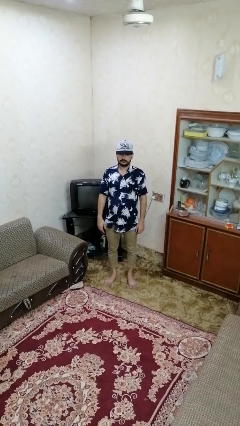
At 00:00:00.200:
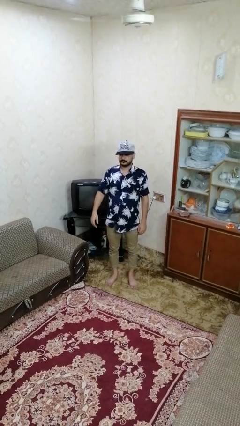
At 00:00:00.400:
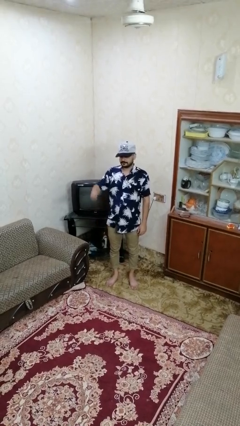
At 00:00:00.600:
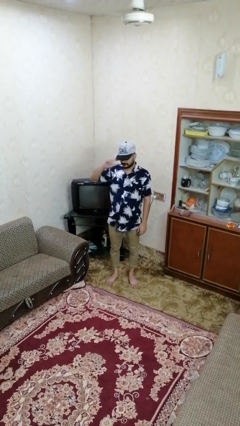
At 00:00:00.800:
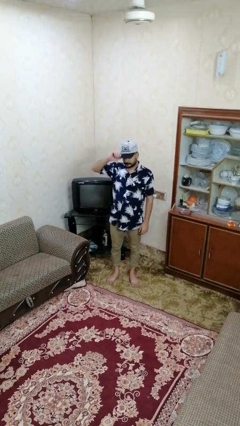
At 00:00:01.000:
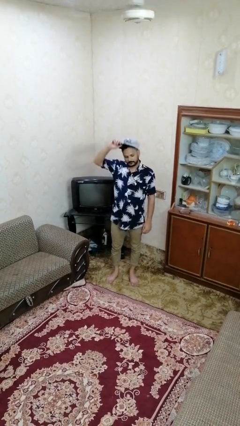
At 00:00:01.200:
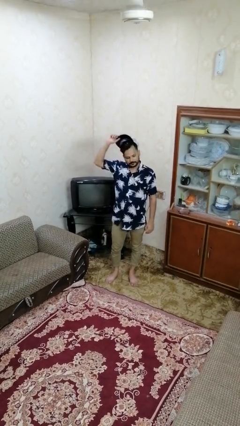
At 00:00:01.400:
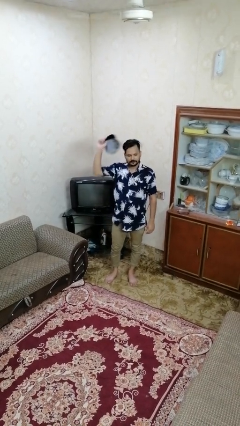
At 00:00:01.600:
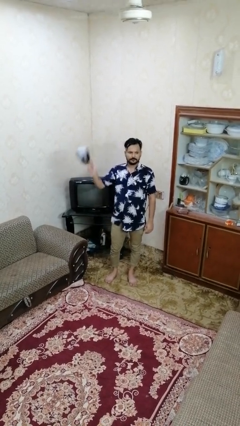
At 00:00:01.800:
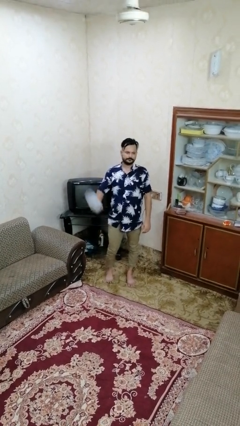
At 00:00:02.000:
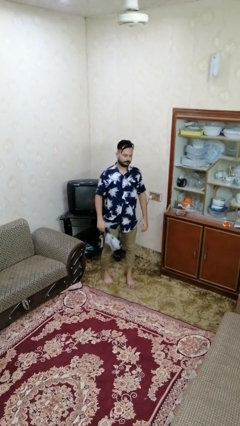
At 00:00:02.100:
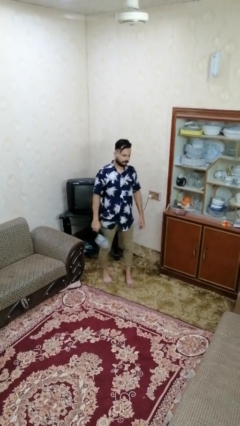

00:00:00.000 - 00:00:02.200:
person takes off hat

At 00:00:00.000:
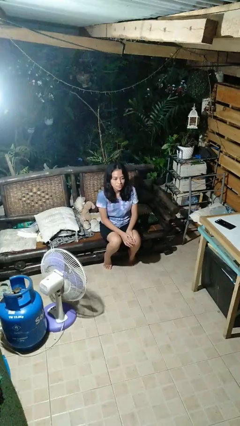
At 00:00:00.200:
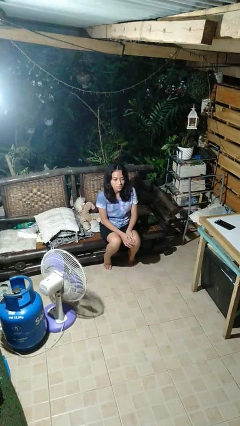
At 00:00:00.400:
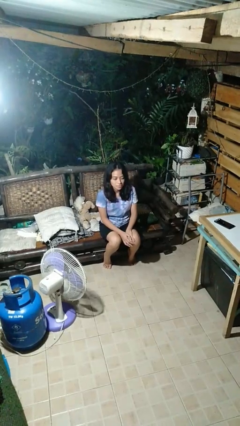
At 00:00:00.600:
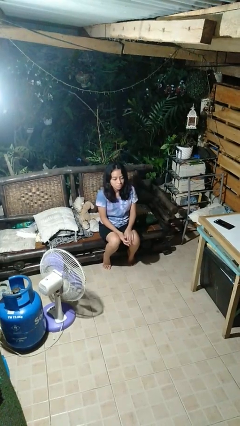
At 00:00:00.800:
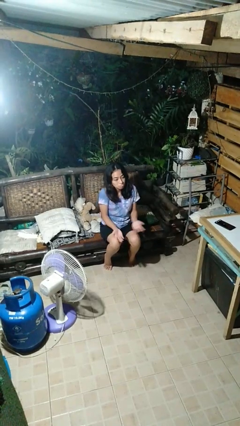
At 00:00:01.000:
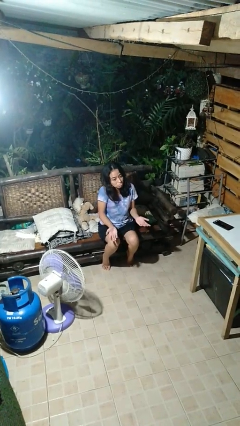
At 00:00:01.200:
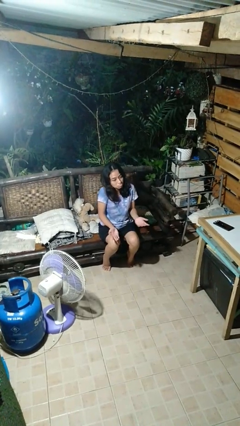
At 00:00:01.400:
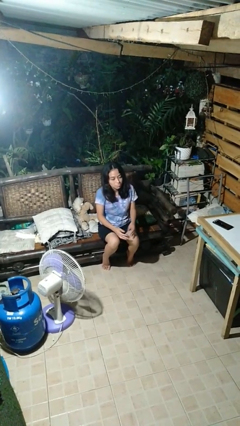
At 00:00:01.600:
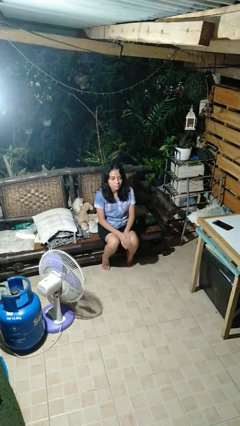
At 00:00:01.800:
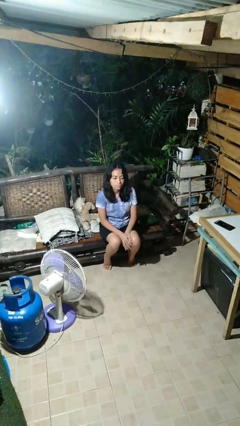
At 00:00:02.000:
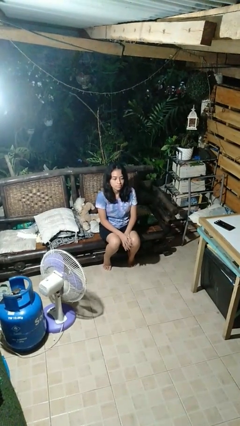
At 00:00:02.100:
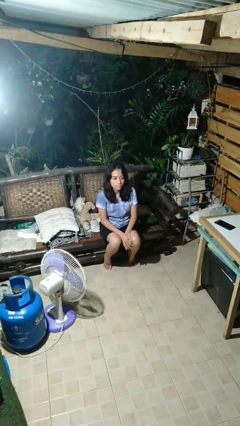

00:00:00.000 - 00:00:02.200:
person shrugs

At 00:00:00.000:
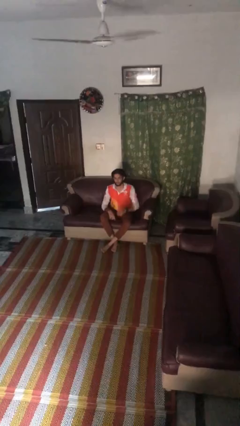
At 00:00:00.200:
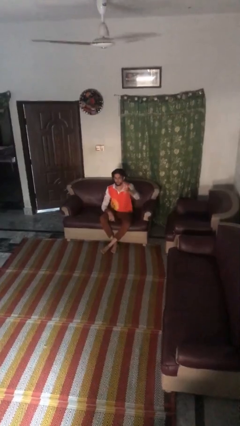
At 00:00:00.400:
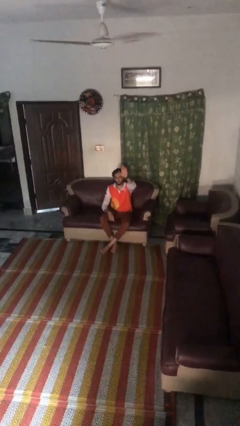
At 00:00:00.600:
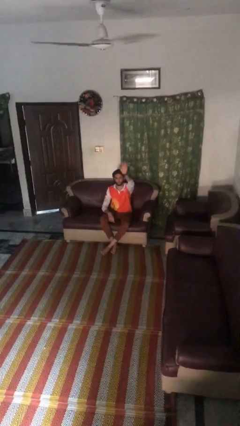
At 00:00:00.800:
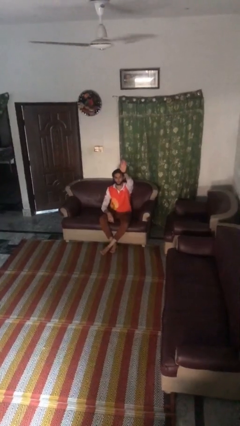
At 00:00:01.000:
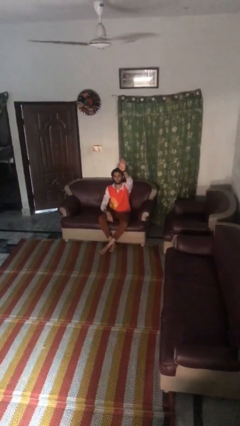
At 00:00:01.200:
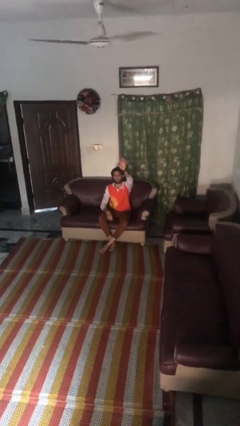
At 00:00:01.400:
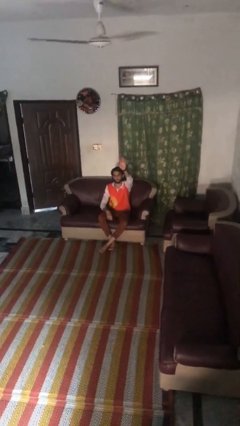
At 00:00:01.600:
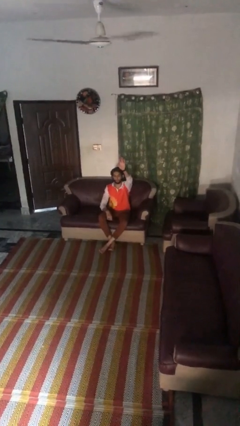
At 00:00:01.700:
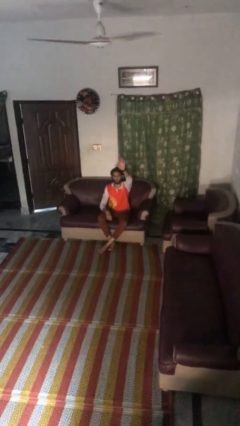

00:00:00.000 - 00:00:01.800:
person gestures raise hand

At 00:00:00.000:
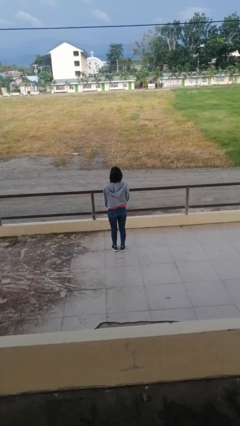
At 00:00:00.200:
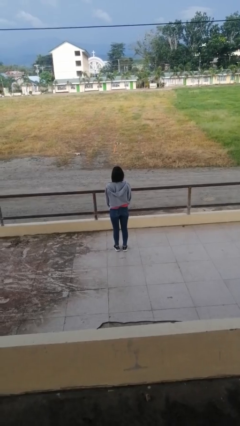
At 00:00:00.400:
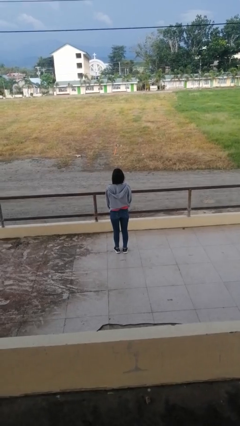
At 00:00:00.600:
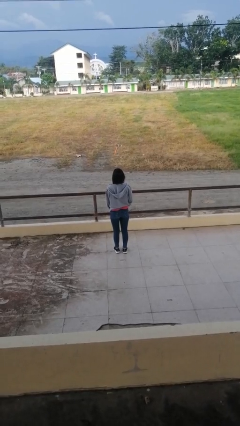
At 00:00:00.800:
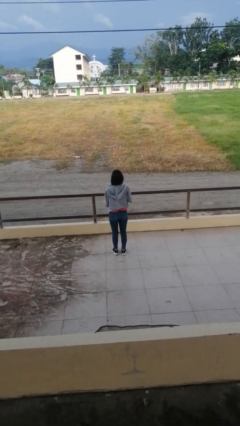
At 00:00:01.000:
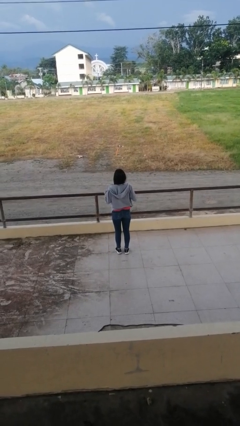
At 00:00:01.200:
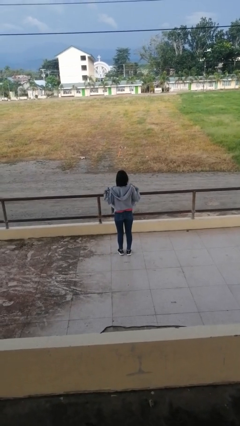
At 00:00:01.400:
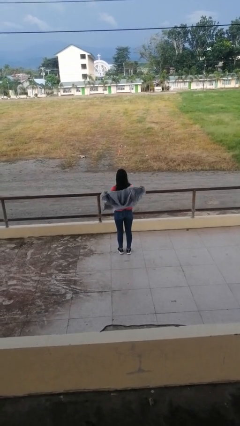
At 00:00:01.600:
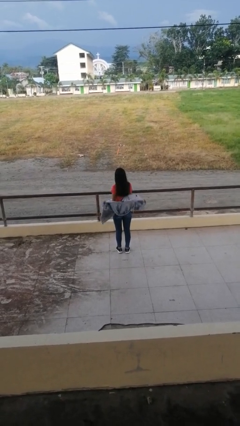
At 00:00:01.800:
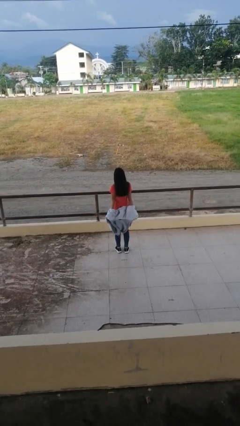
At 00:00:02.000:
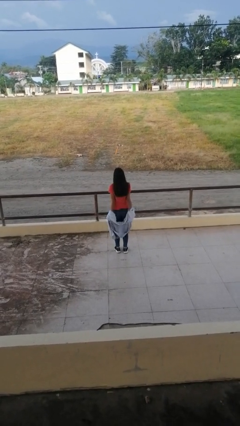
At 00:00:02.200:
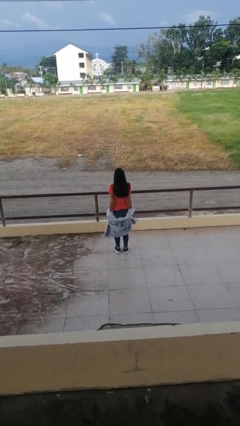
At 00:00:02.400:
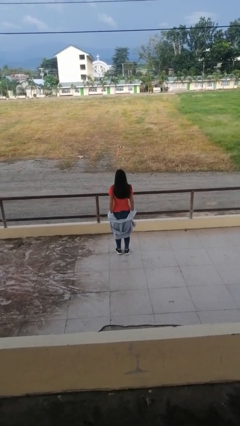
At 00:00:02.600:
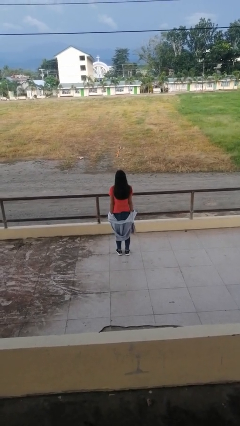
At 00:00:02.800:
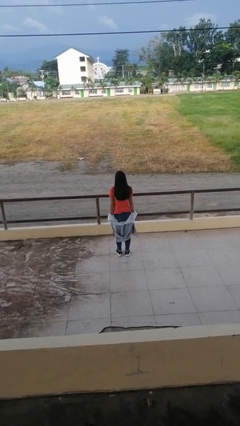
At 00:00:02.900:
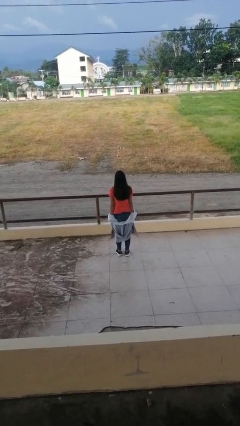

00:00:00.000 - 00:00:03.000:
person takes off jacket

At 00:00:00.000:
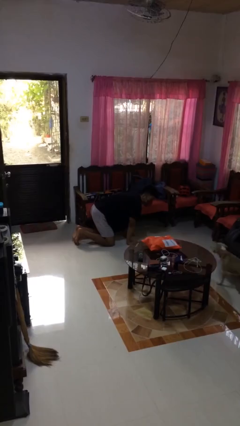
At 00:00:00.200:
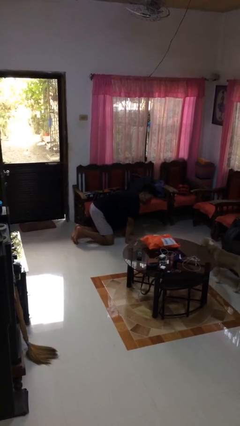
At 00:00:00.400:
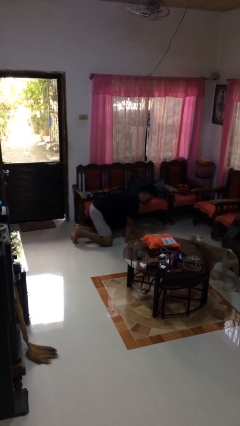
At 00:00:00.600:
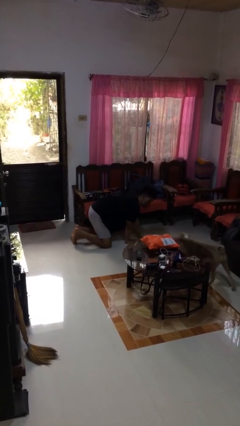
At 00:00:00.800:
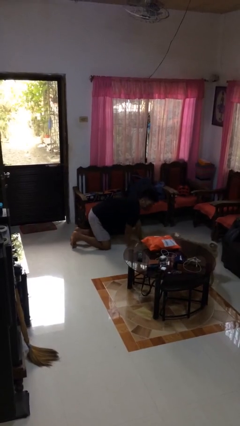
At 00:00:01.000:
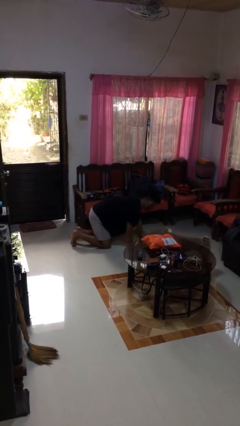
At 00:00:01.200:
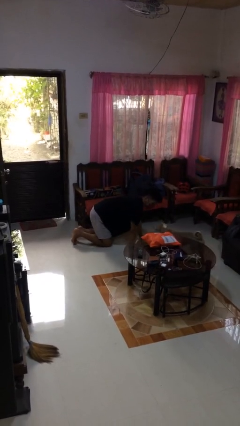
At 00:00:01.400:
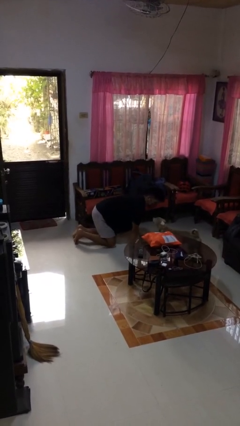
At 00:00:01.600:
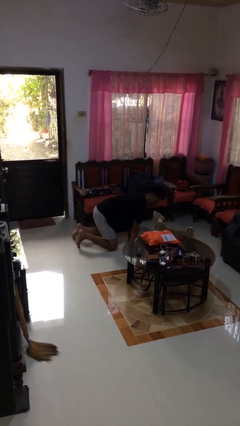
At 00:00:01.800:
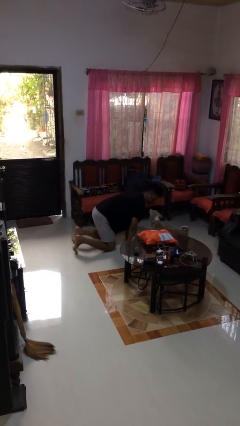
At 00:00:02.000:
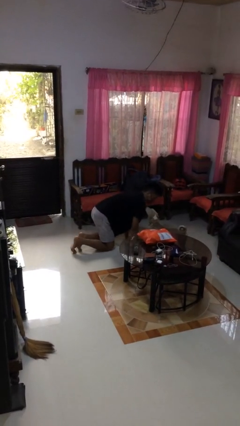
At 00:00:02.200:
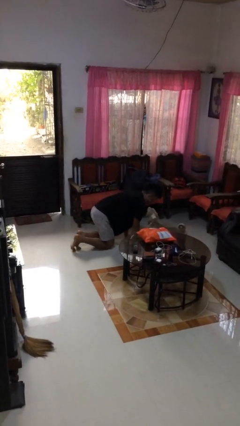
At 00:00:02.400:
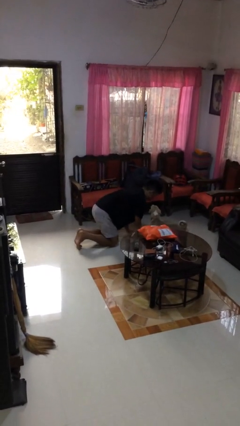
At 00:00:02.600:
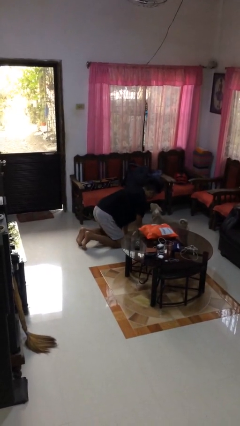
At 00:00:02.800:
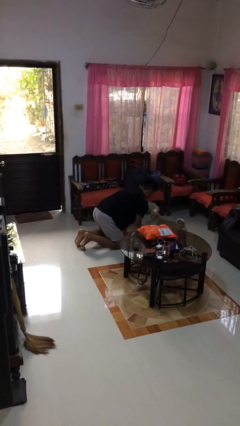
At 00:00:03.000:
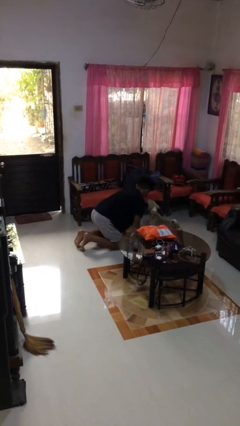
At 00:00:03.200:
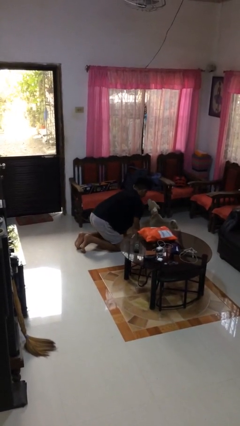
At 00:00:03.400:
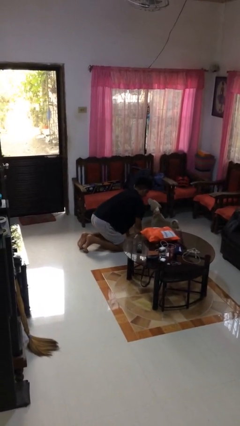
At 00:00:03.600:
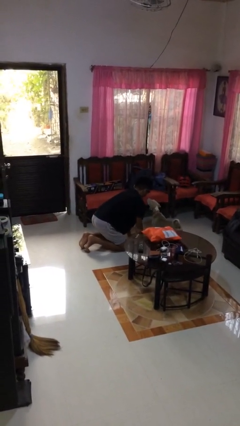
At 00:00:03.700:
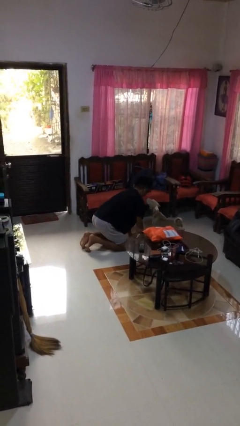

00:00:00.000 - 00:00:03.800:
person crawls

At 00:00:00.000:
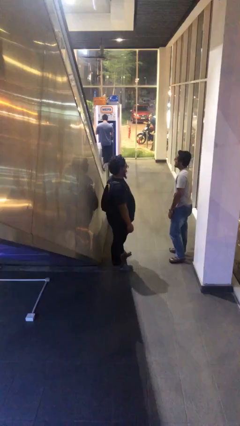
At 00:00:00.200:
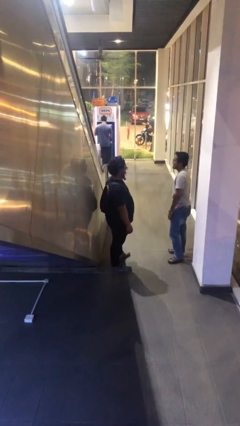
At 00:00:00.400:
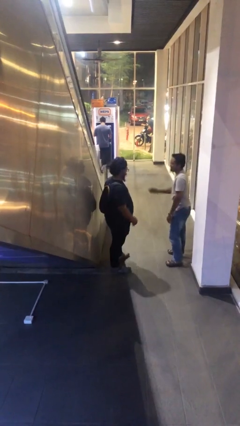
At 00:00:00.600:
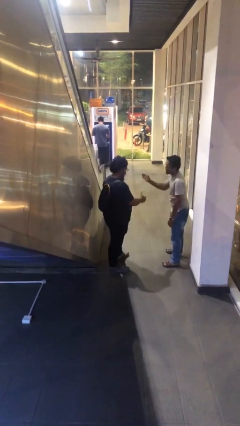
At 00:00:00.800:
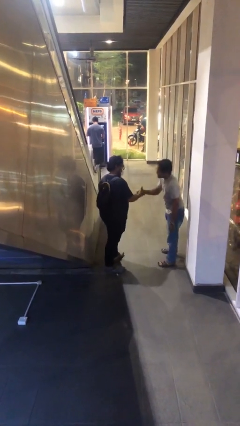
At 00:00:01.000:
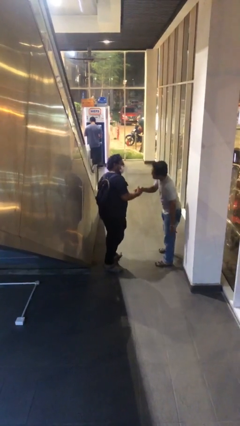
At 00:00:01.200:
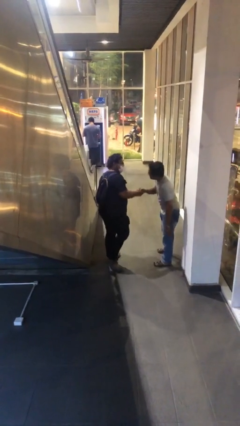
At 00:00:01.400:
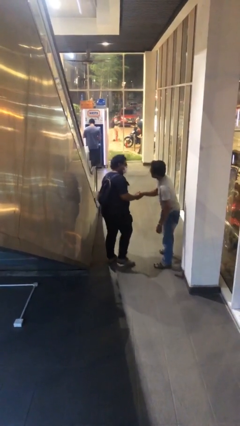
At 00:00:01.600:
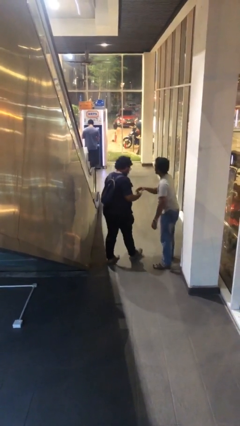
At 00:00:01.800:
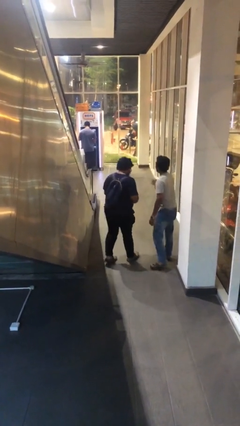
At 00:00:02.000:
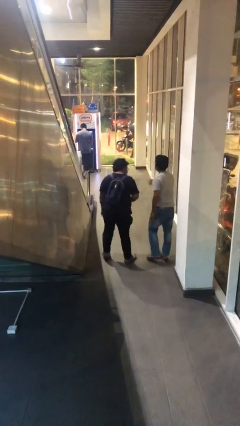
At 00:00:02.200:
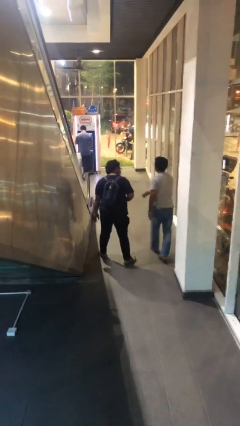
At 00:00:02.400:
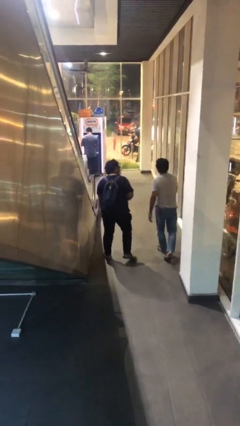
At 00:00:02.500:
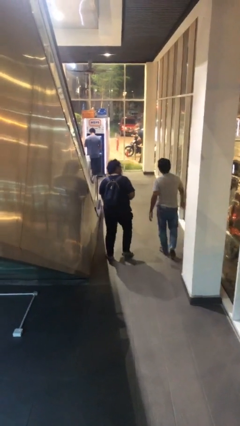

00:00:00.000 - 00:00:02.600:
person shakes hand

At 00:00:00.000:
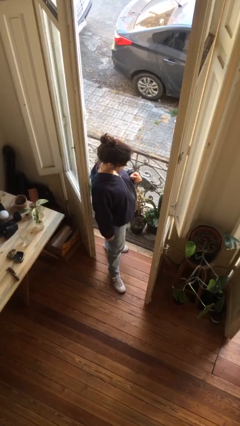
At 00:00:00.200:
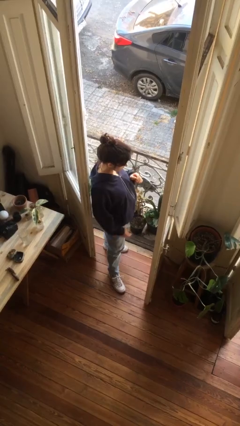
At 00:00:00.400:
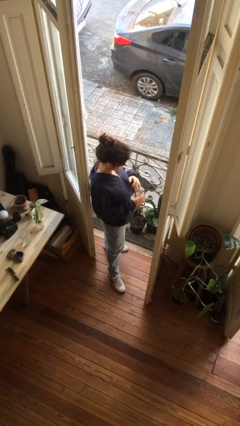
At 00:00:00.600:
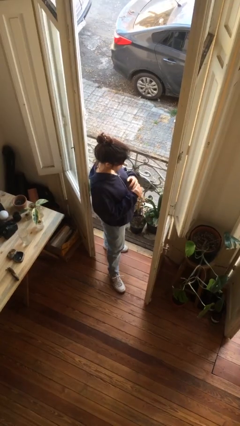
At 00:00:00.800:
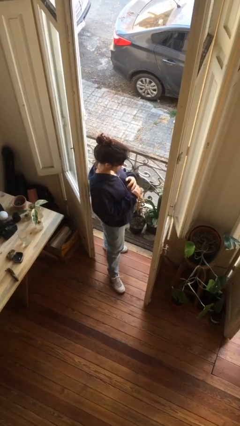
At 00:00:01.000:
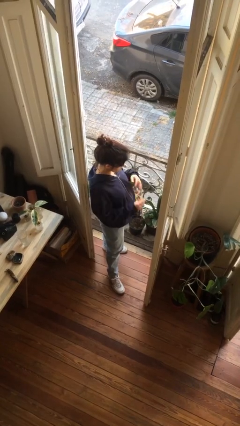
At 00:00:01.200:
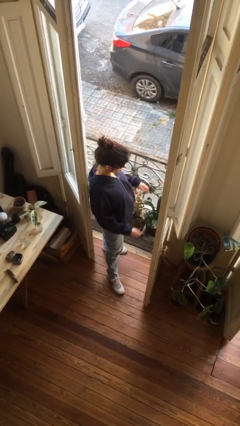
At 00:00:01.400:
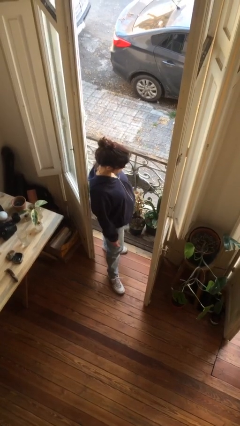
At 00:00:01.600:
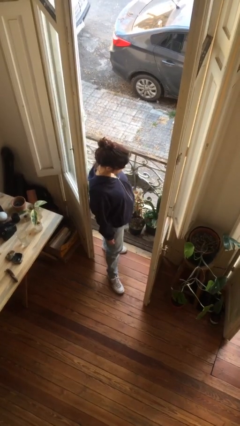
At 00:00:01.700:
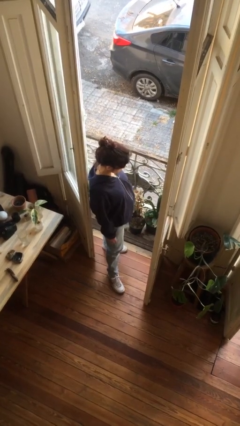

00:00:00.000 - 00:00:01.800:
person takes off ring
